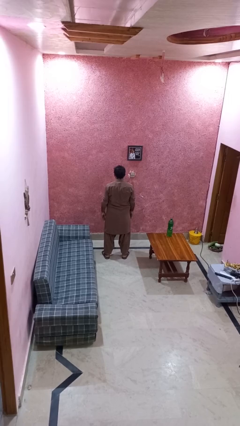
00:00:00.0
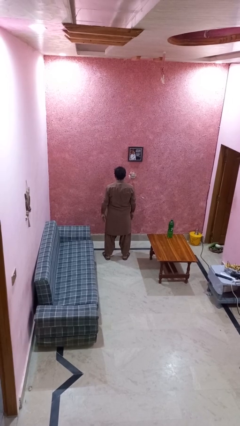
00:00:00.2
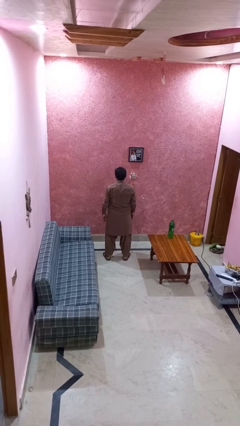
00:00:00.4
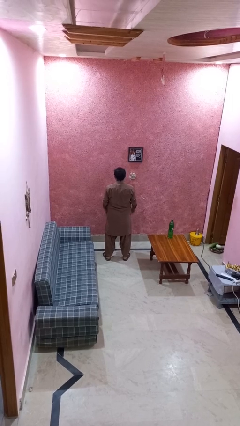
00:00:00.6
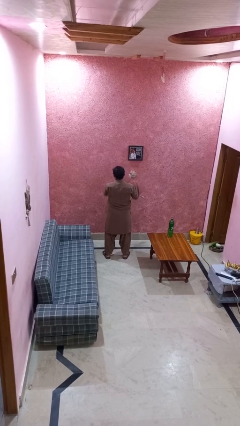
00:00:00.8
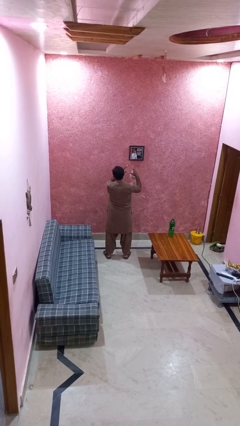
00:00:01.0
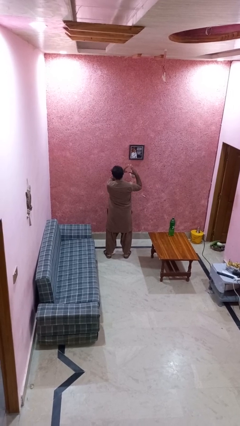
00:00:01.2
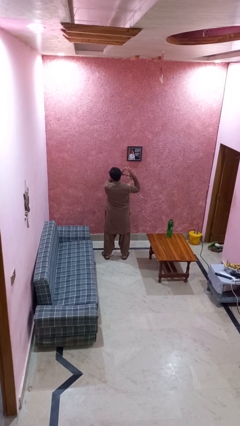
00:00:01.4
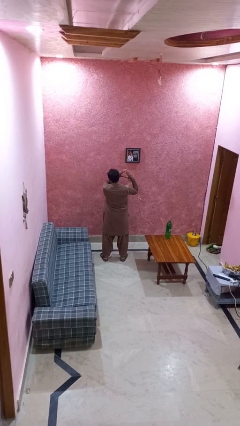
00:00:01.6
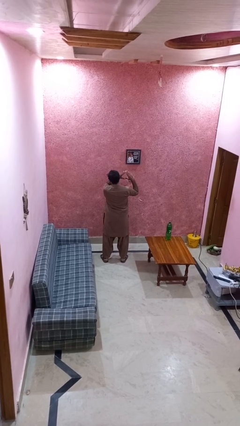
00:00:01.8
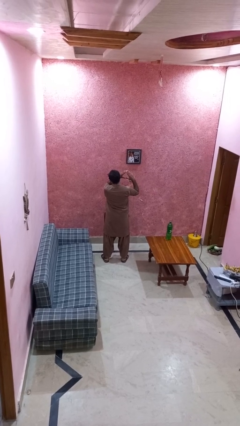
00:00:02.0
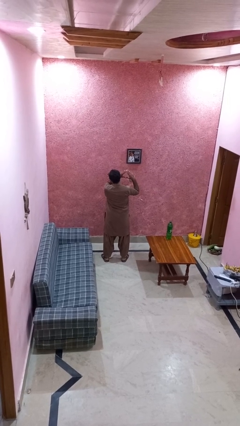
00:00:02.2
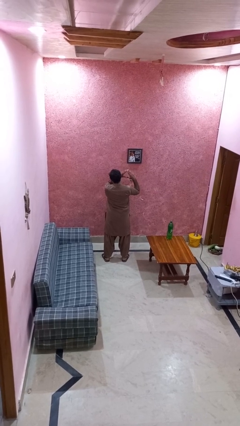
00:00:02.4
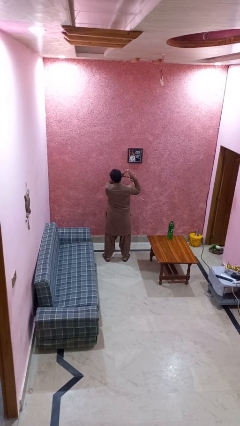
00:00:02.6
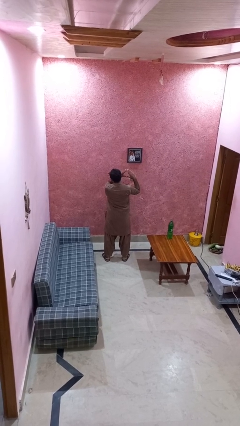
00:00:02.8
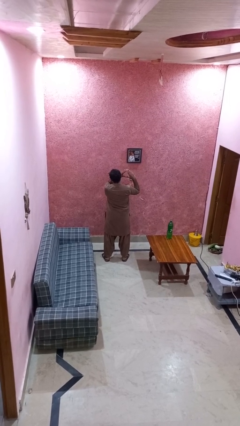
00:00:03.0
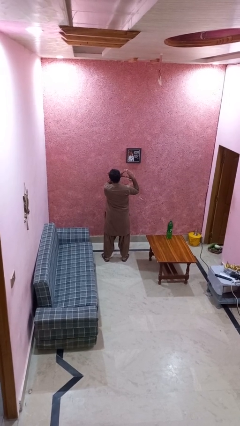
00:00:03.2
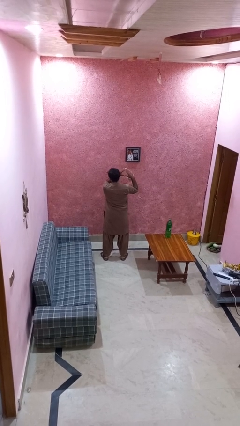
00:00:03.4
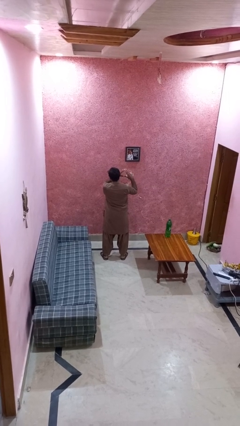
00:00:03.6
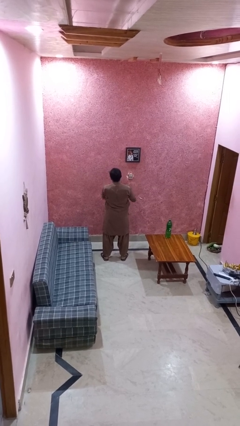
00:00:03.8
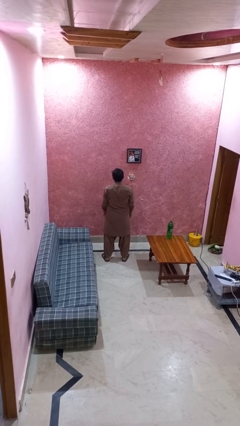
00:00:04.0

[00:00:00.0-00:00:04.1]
person gestures heart

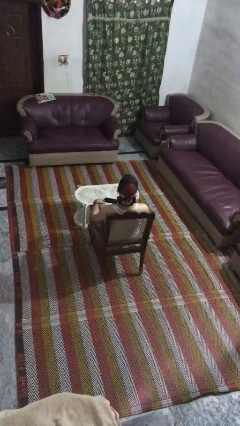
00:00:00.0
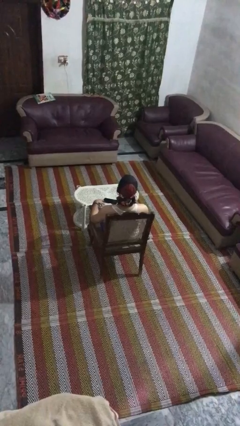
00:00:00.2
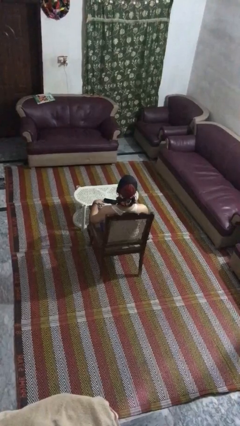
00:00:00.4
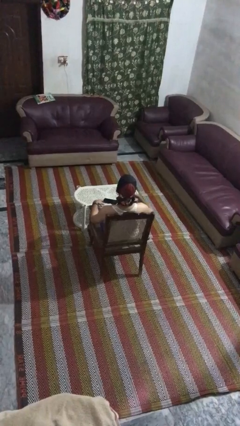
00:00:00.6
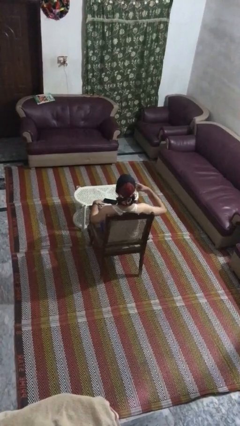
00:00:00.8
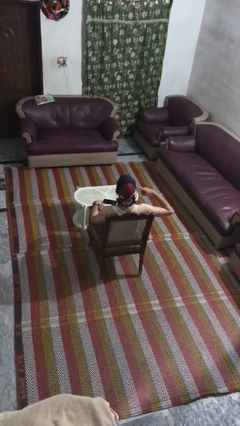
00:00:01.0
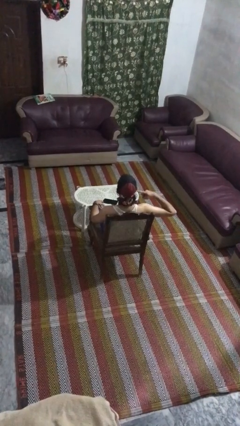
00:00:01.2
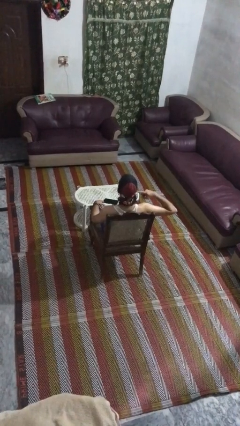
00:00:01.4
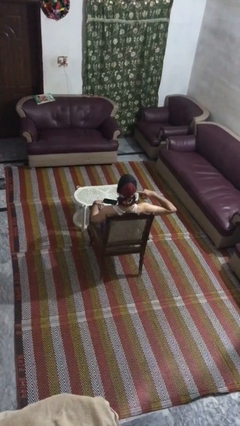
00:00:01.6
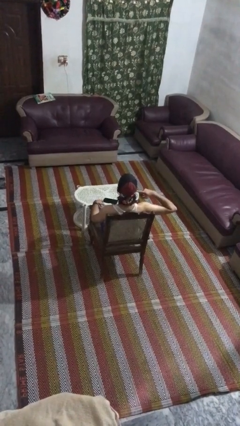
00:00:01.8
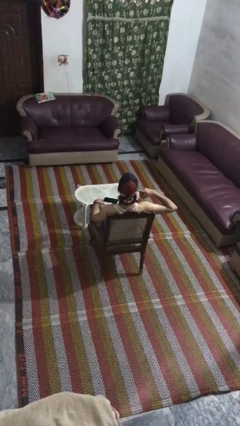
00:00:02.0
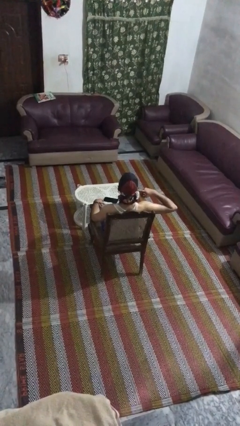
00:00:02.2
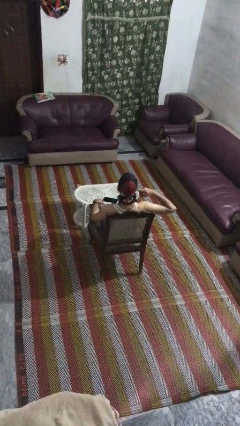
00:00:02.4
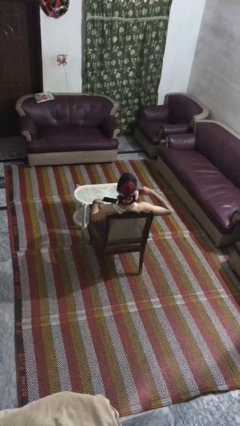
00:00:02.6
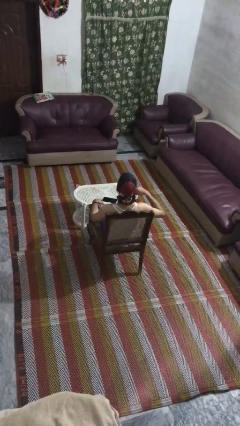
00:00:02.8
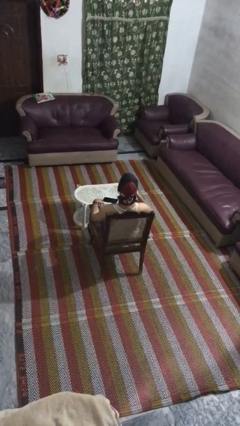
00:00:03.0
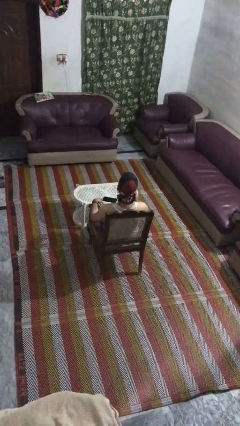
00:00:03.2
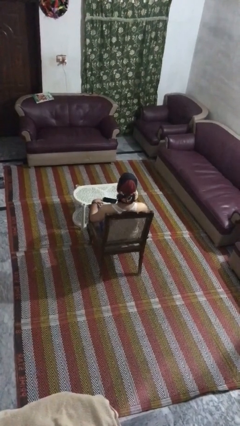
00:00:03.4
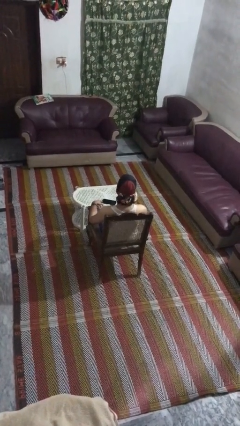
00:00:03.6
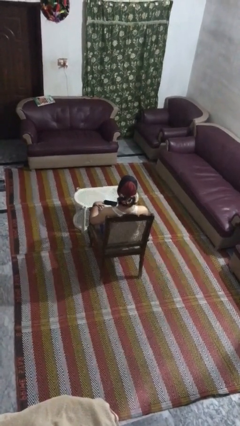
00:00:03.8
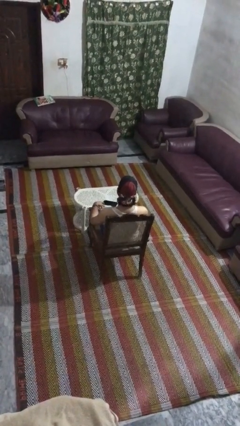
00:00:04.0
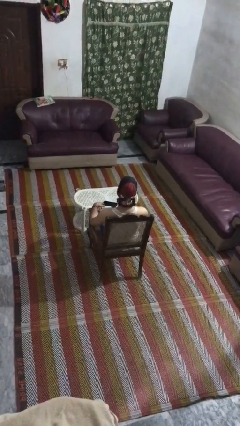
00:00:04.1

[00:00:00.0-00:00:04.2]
person gestures listen closely

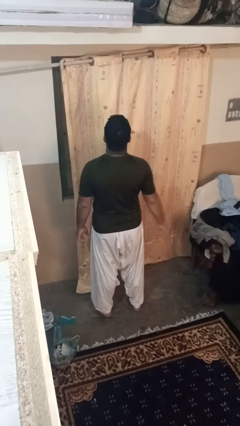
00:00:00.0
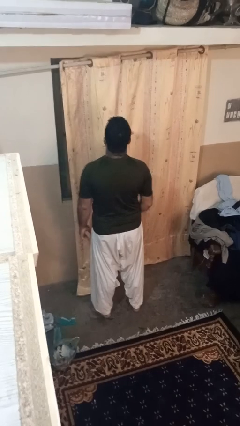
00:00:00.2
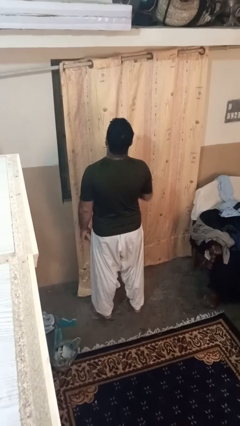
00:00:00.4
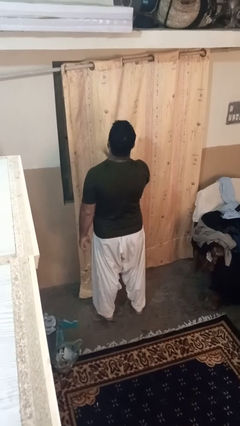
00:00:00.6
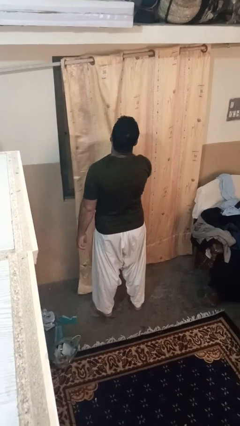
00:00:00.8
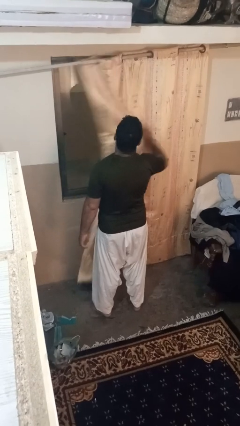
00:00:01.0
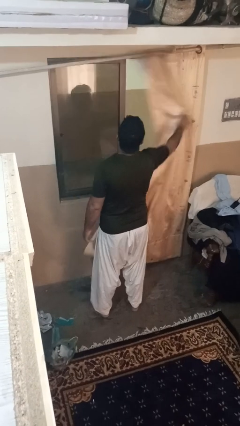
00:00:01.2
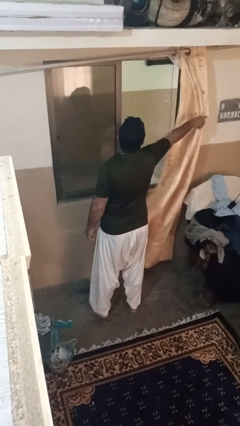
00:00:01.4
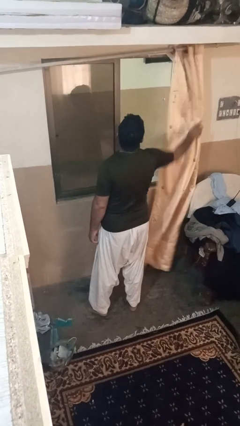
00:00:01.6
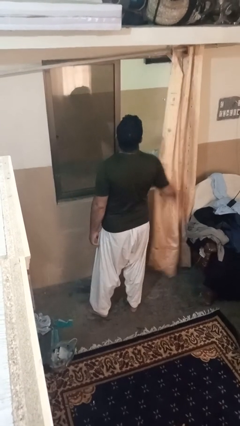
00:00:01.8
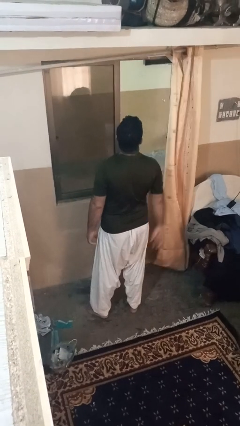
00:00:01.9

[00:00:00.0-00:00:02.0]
person opens curtains

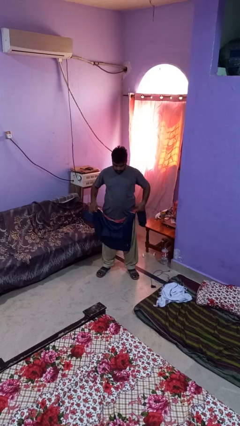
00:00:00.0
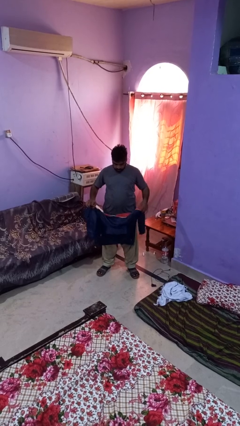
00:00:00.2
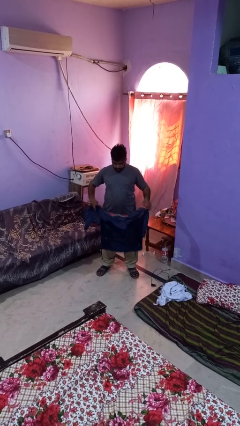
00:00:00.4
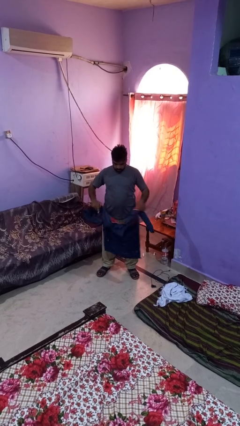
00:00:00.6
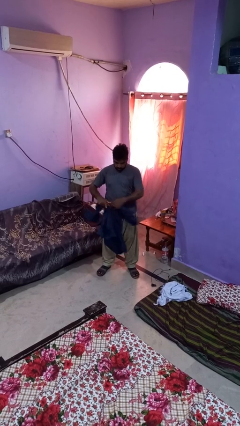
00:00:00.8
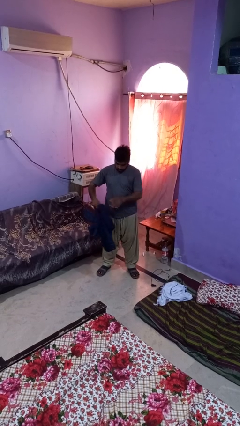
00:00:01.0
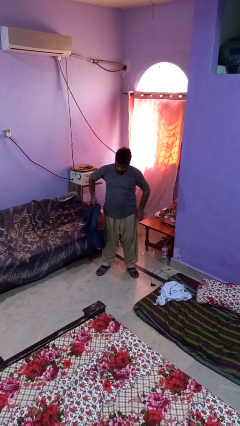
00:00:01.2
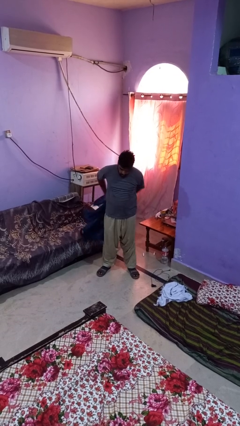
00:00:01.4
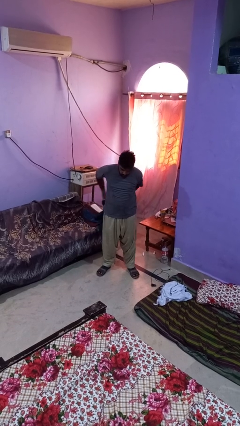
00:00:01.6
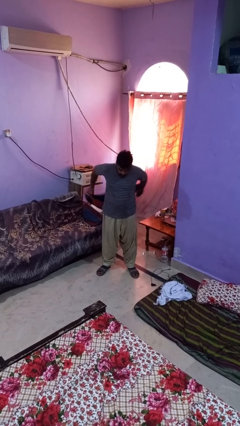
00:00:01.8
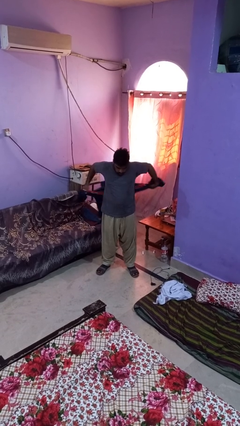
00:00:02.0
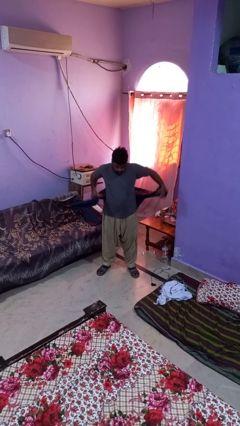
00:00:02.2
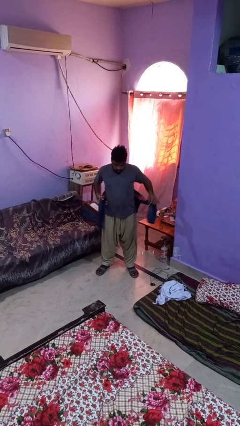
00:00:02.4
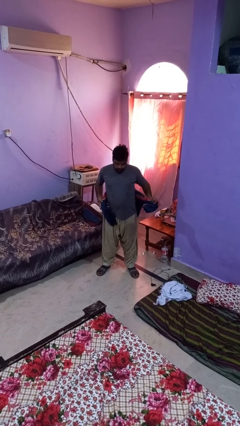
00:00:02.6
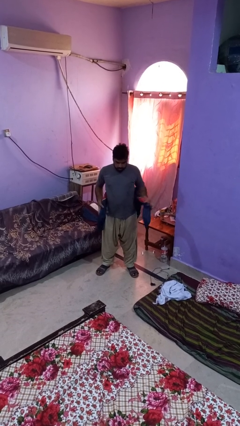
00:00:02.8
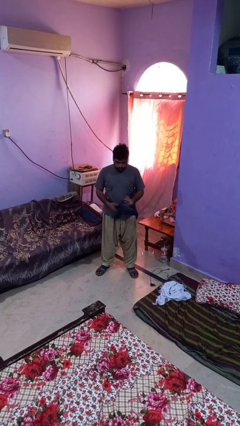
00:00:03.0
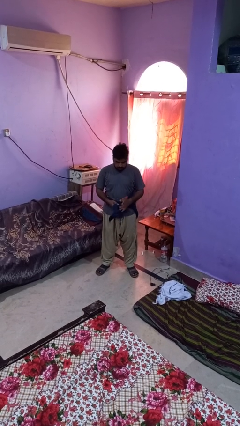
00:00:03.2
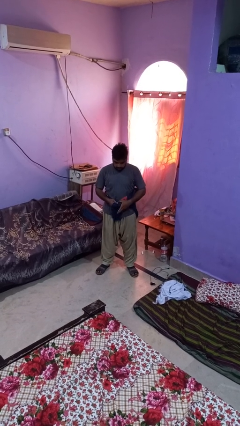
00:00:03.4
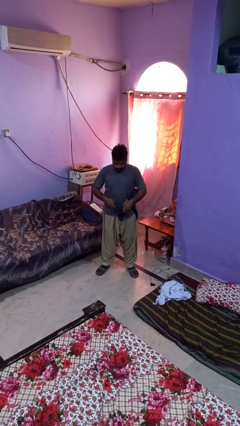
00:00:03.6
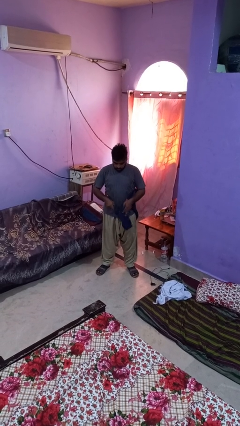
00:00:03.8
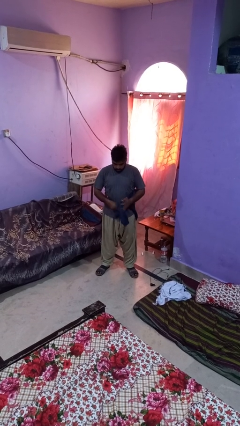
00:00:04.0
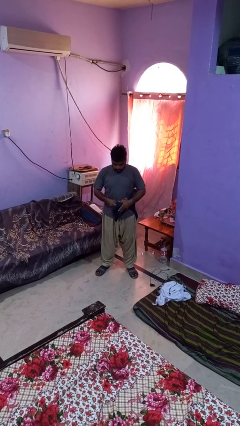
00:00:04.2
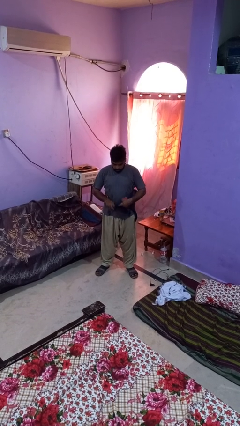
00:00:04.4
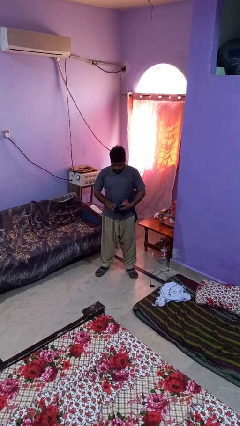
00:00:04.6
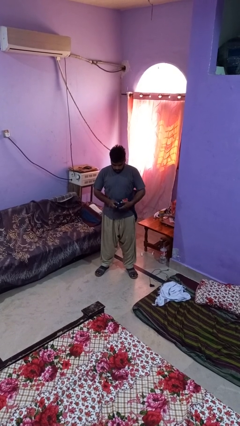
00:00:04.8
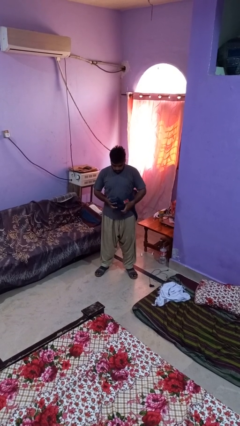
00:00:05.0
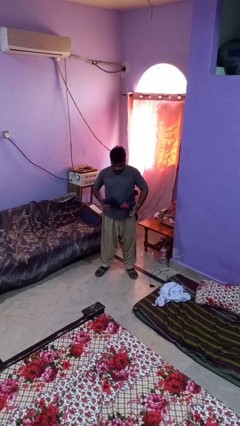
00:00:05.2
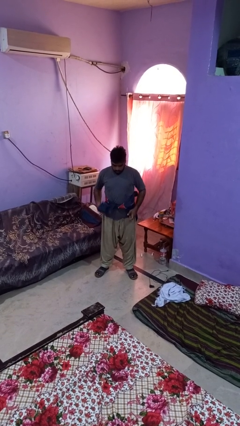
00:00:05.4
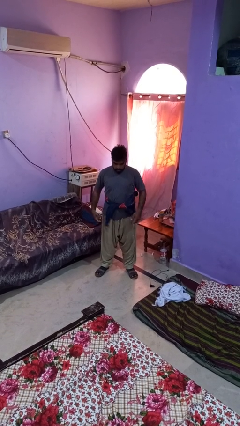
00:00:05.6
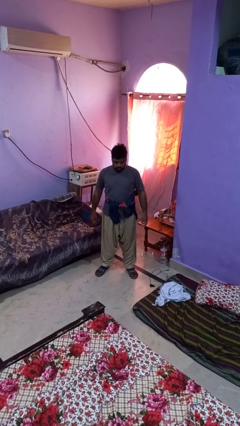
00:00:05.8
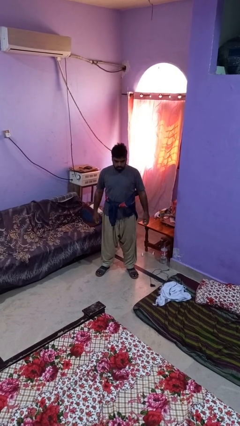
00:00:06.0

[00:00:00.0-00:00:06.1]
person ties jacket around waist

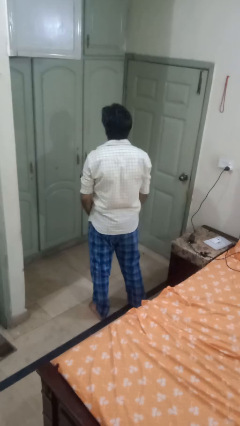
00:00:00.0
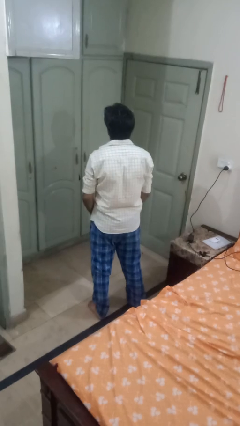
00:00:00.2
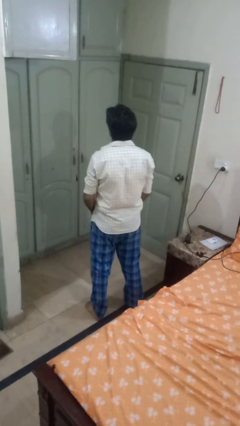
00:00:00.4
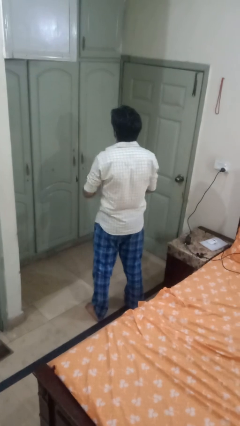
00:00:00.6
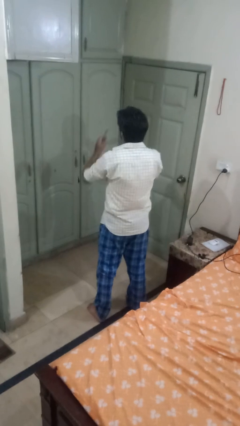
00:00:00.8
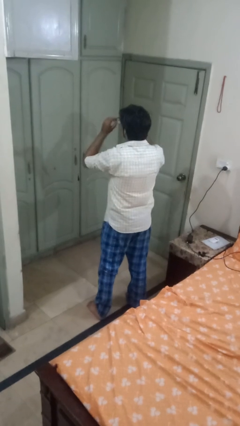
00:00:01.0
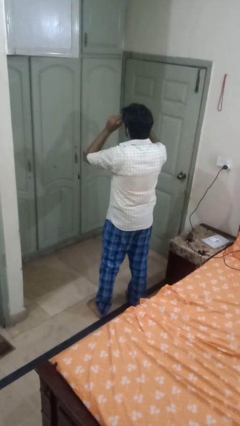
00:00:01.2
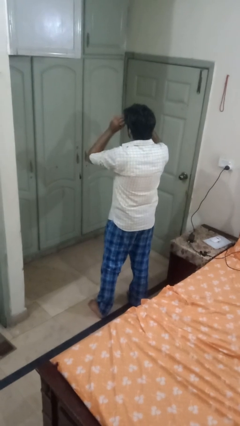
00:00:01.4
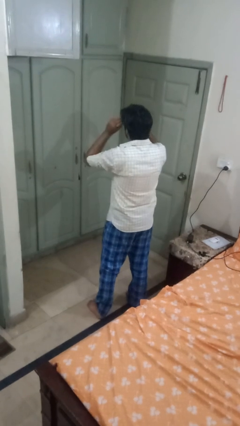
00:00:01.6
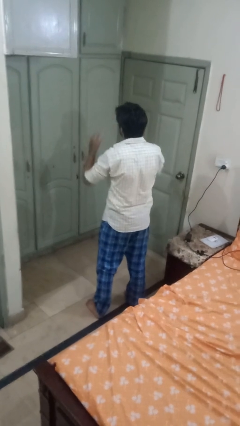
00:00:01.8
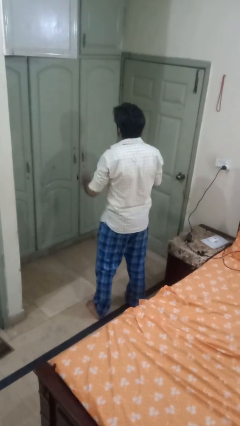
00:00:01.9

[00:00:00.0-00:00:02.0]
person puts on glasses
